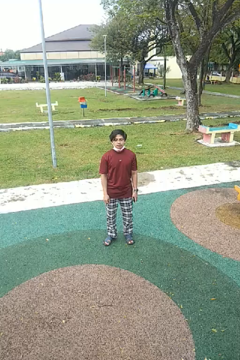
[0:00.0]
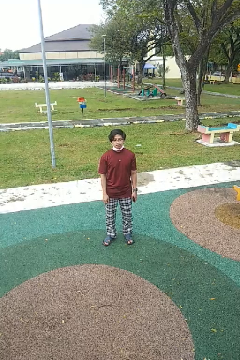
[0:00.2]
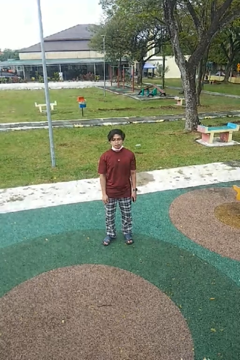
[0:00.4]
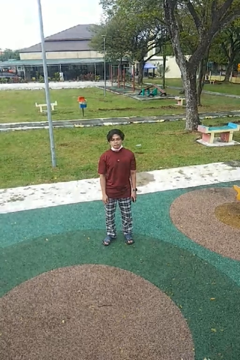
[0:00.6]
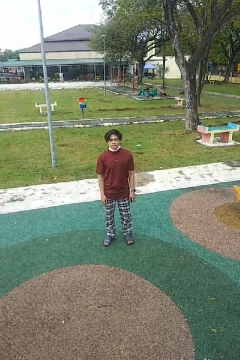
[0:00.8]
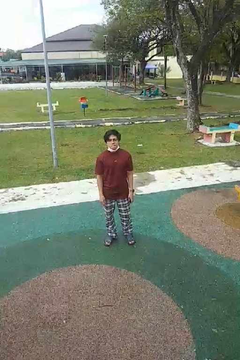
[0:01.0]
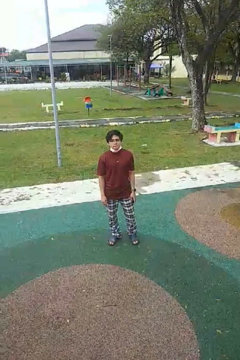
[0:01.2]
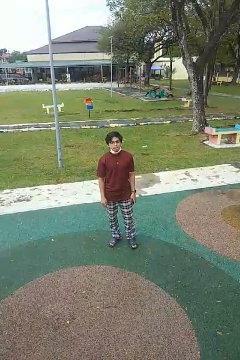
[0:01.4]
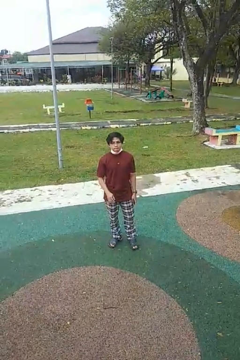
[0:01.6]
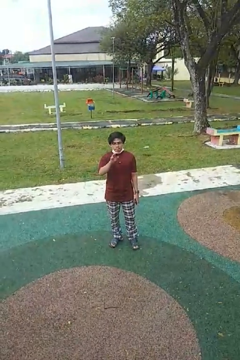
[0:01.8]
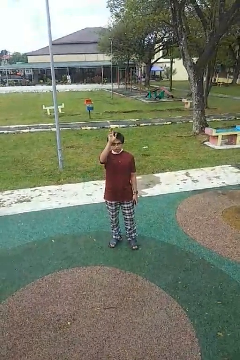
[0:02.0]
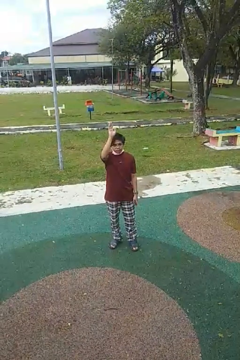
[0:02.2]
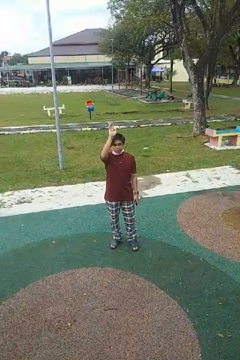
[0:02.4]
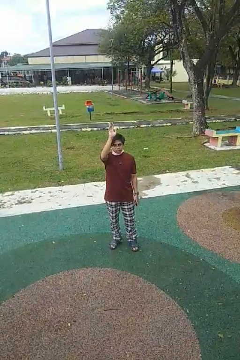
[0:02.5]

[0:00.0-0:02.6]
person gestures raise hand

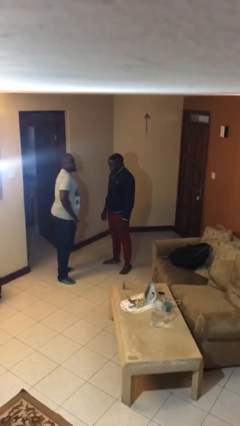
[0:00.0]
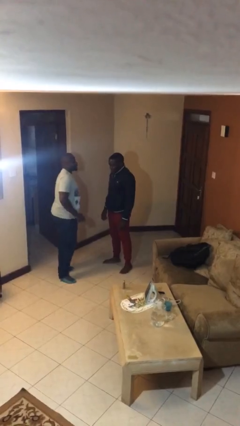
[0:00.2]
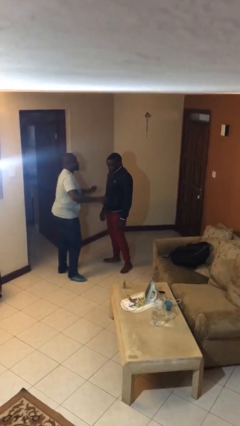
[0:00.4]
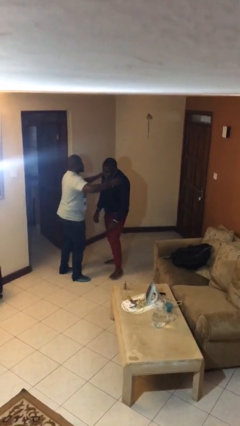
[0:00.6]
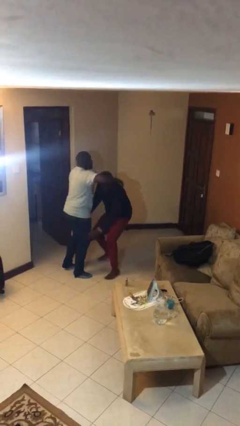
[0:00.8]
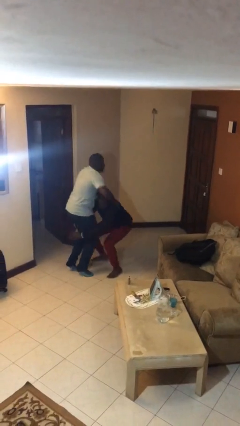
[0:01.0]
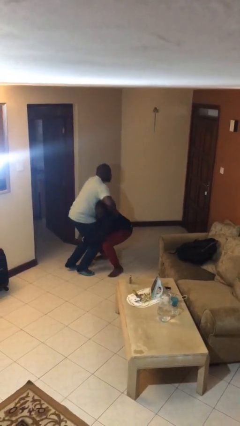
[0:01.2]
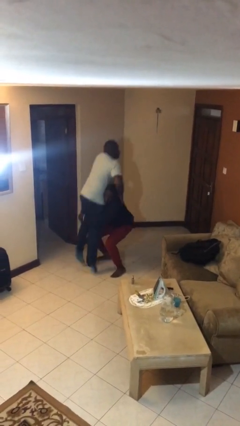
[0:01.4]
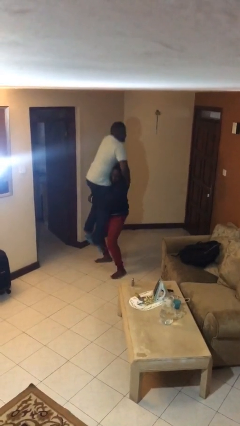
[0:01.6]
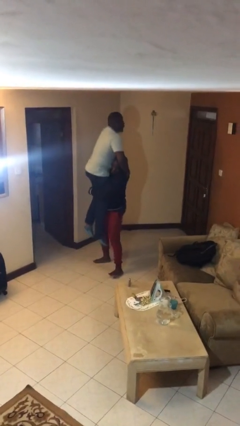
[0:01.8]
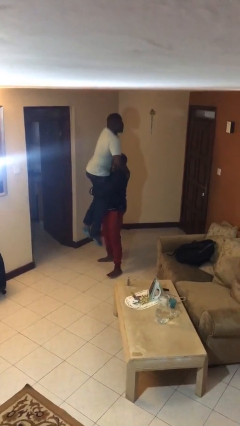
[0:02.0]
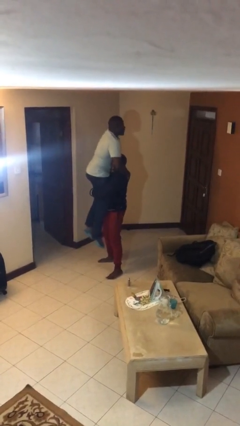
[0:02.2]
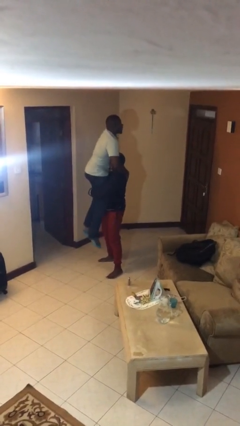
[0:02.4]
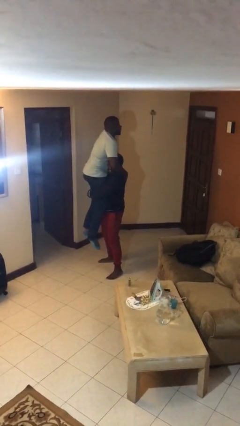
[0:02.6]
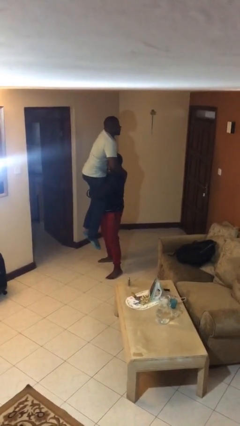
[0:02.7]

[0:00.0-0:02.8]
person picks up person

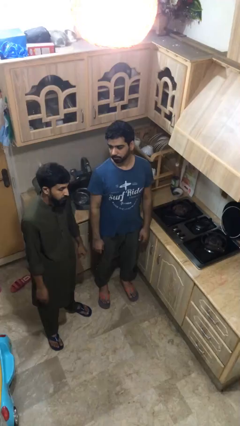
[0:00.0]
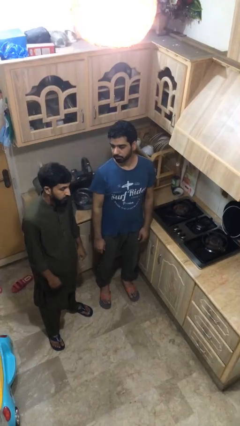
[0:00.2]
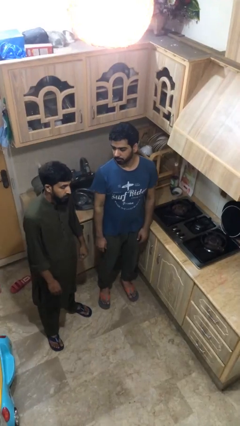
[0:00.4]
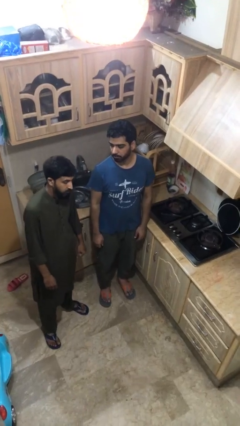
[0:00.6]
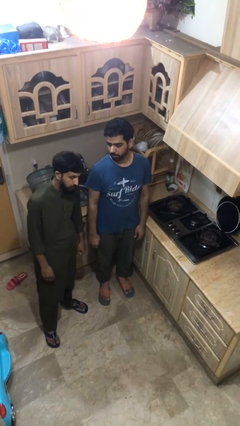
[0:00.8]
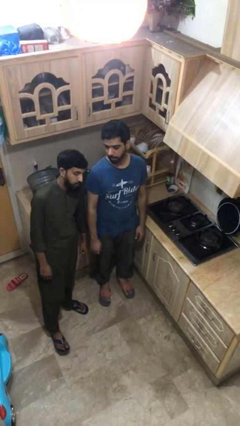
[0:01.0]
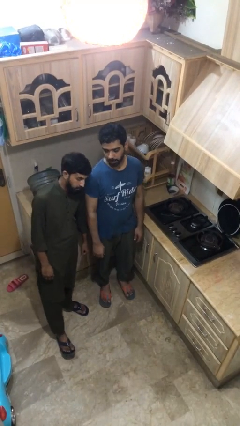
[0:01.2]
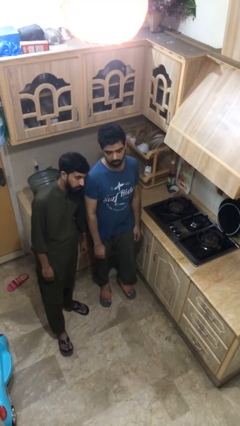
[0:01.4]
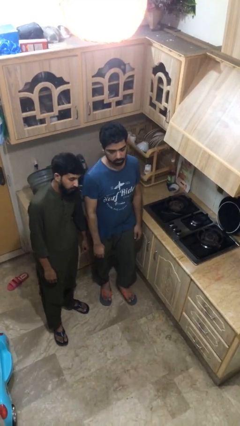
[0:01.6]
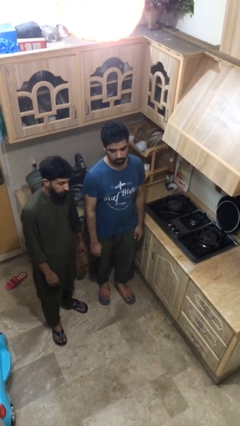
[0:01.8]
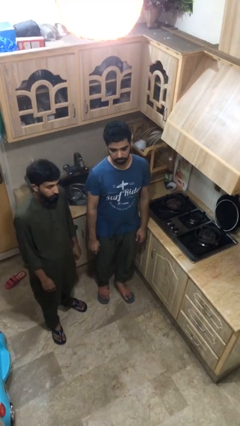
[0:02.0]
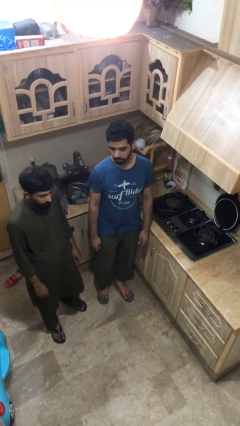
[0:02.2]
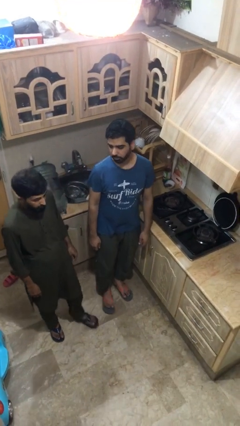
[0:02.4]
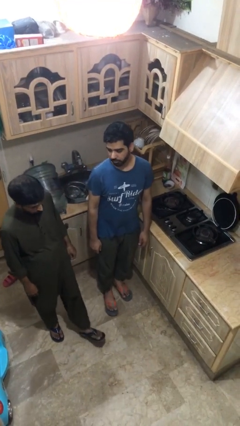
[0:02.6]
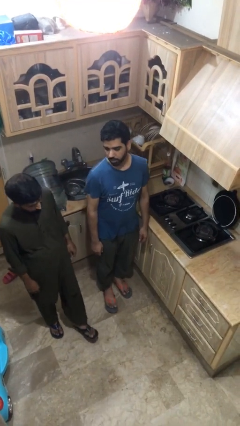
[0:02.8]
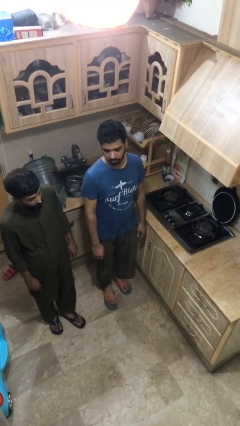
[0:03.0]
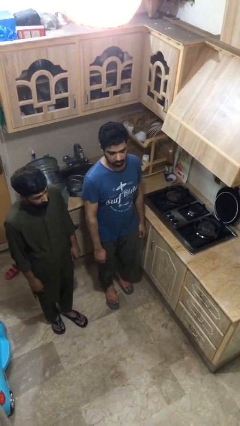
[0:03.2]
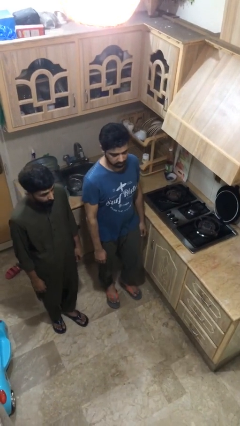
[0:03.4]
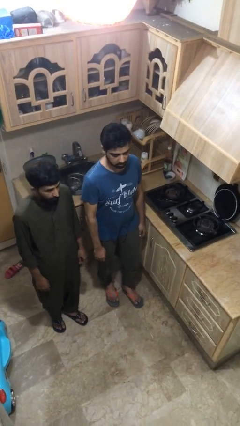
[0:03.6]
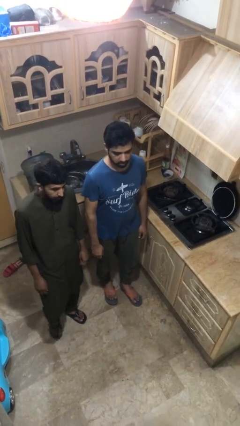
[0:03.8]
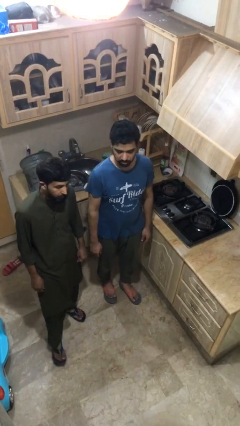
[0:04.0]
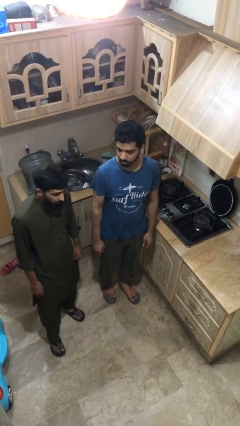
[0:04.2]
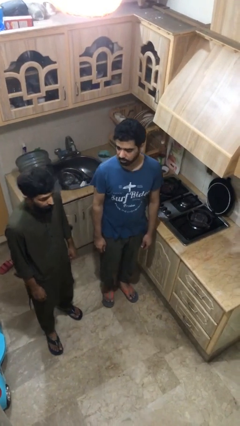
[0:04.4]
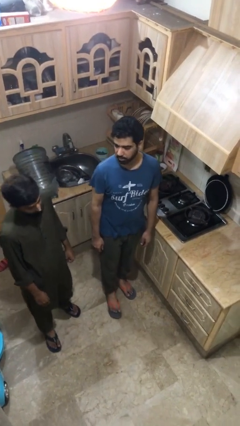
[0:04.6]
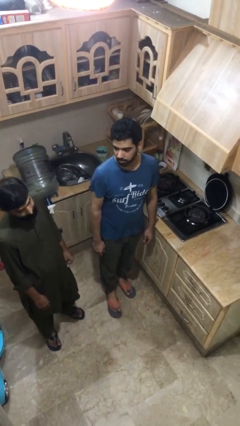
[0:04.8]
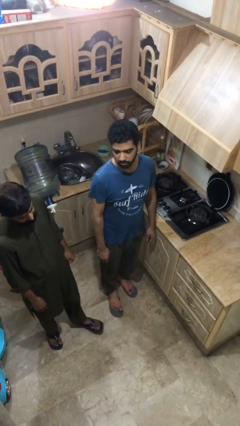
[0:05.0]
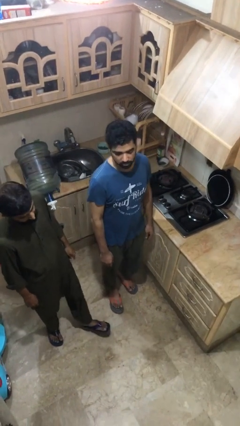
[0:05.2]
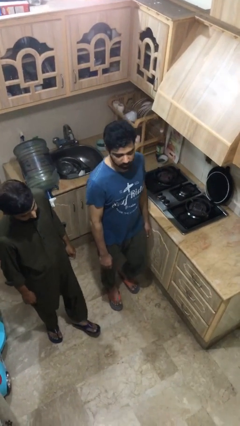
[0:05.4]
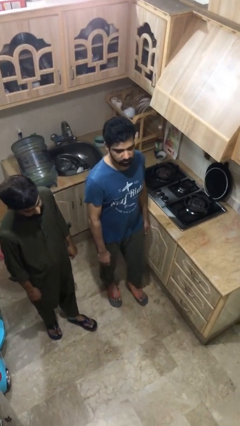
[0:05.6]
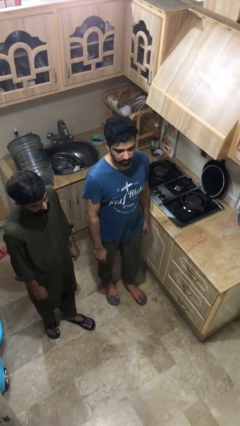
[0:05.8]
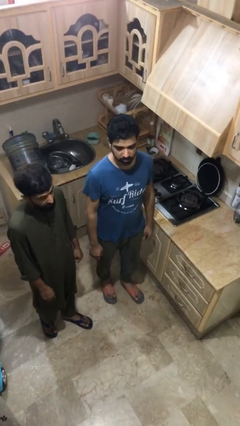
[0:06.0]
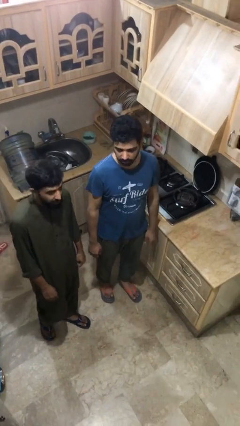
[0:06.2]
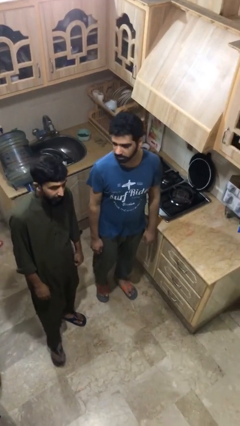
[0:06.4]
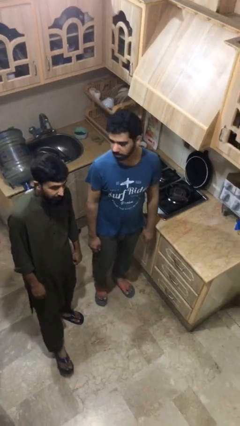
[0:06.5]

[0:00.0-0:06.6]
person talks to person

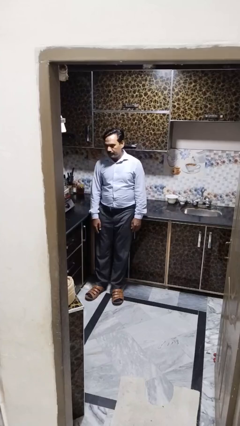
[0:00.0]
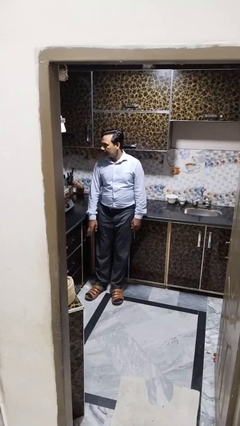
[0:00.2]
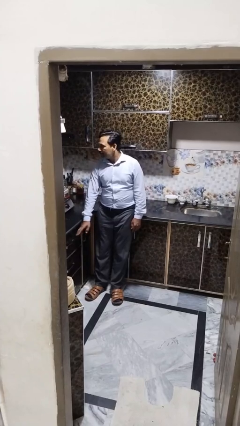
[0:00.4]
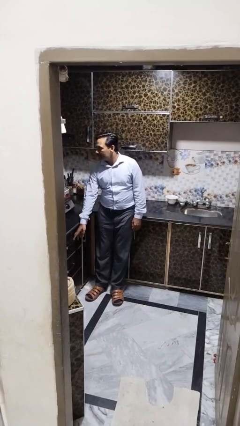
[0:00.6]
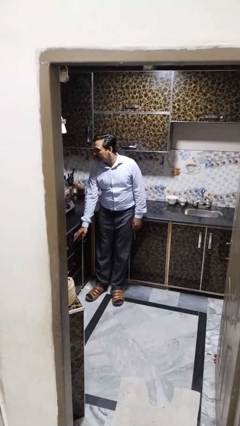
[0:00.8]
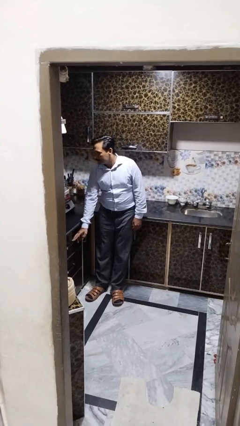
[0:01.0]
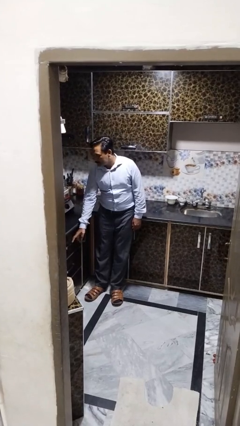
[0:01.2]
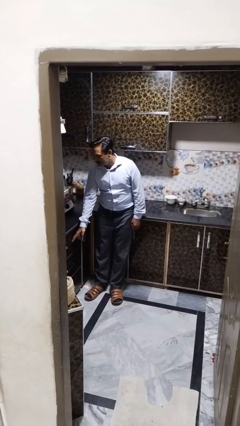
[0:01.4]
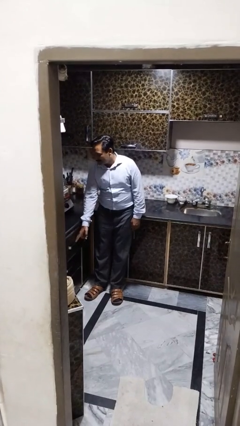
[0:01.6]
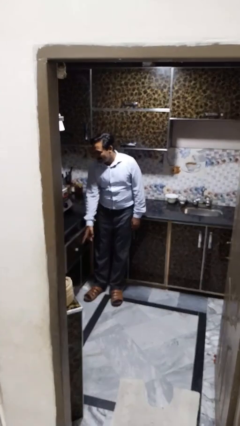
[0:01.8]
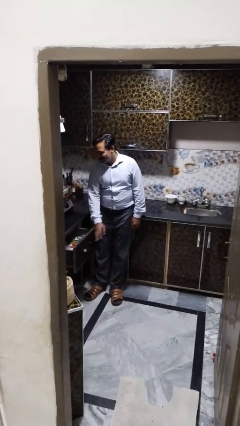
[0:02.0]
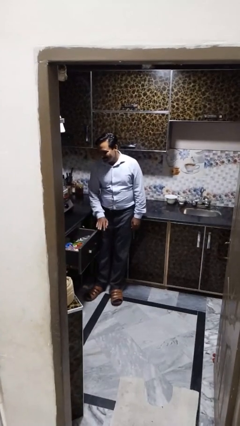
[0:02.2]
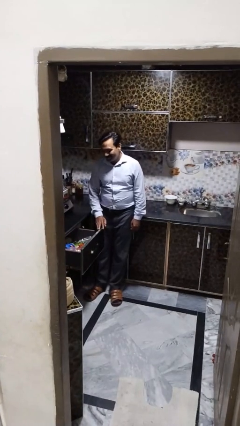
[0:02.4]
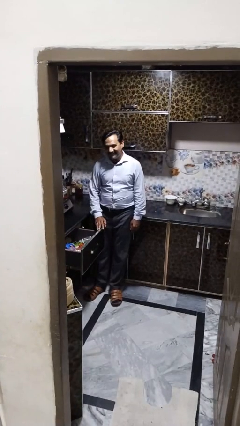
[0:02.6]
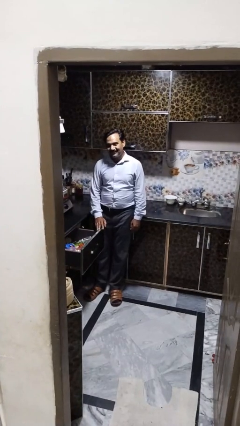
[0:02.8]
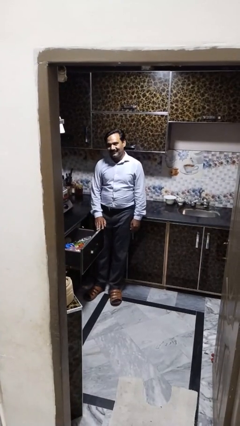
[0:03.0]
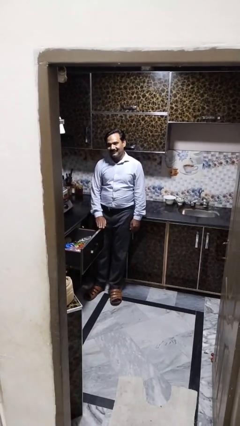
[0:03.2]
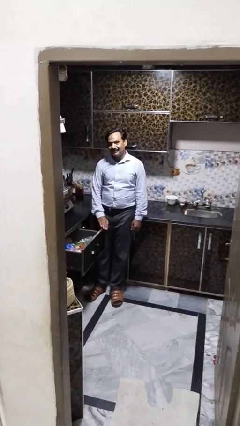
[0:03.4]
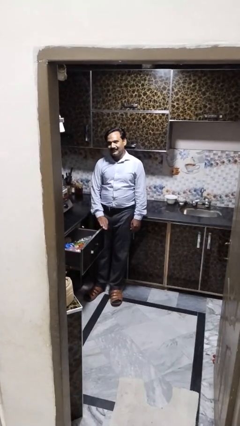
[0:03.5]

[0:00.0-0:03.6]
person opens kitchen drawer

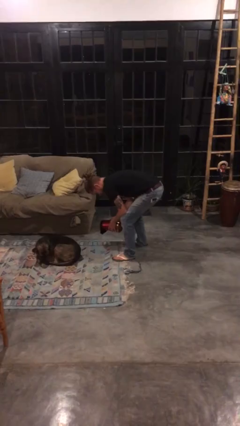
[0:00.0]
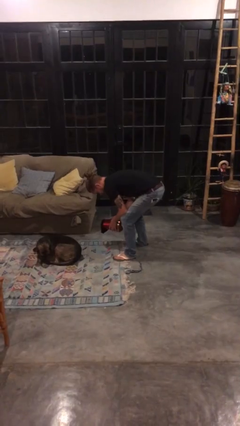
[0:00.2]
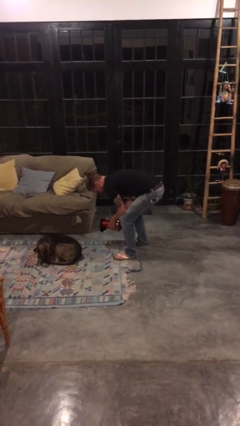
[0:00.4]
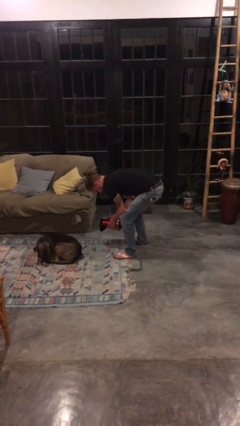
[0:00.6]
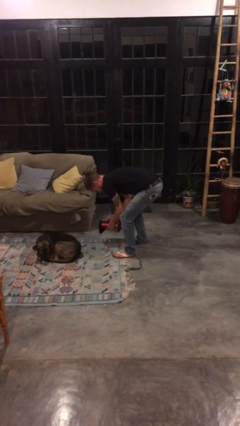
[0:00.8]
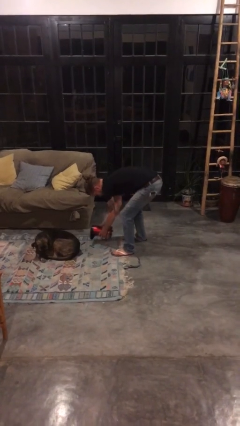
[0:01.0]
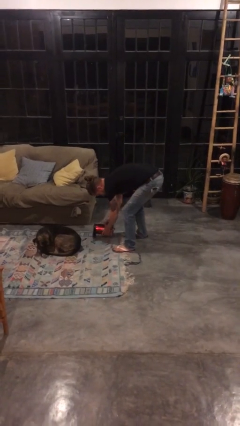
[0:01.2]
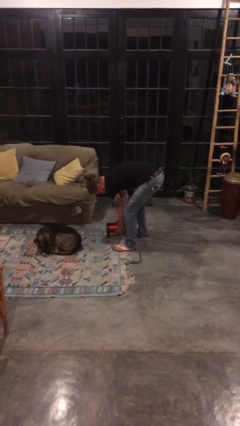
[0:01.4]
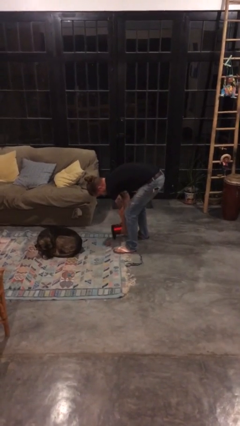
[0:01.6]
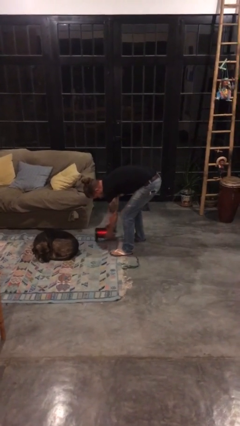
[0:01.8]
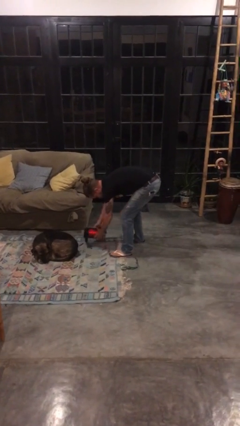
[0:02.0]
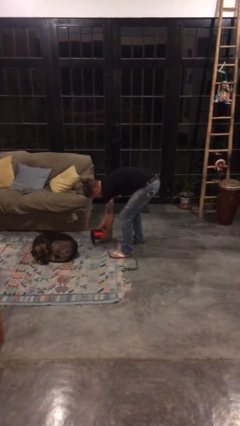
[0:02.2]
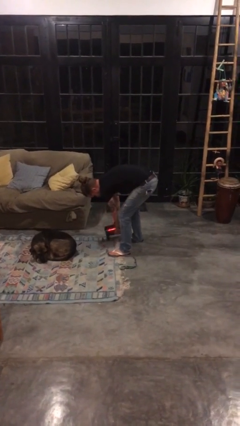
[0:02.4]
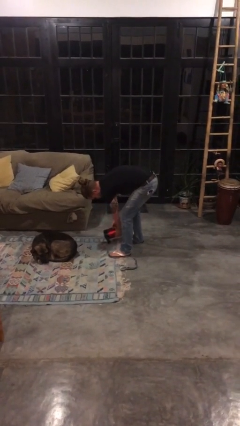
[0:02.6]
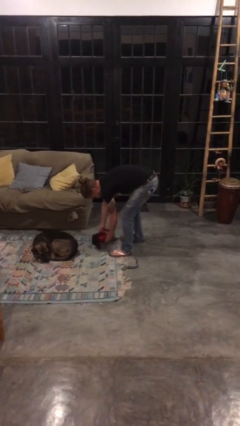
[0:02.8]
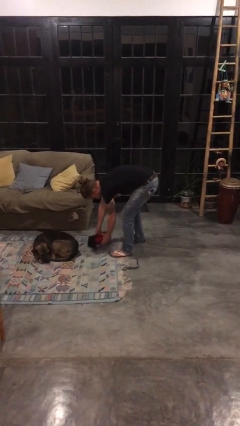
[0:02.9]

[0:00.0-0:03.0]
person vacuums carpet
